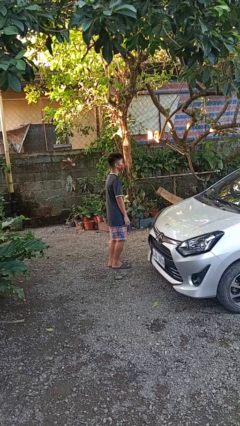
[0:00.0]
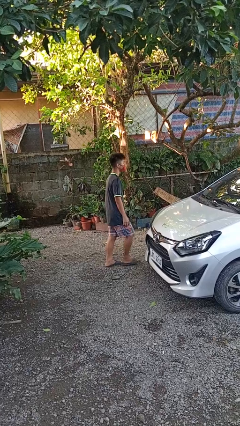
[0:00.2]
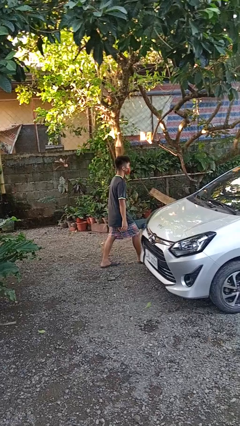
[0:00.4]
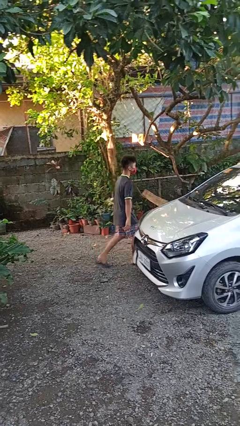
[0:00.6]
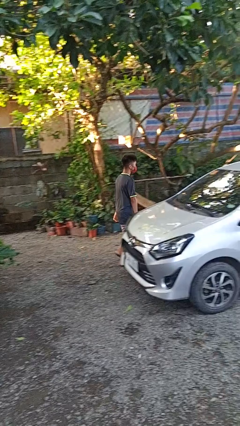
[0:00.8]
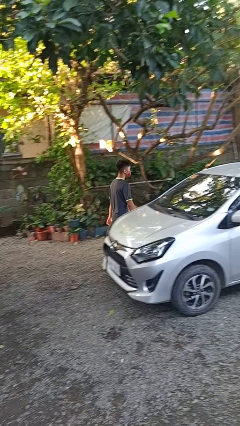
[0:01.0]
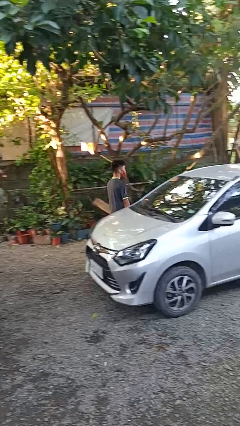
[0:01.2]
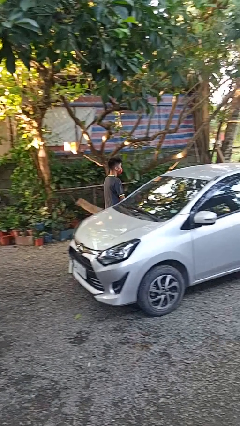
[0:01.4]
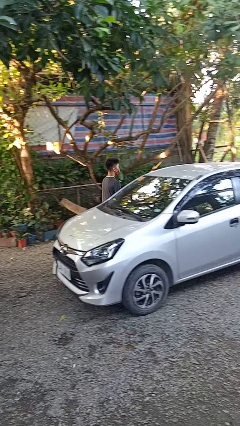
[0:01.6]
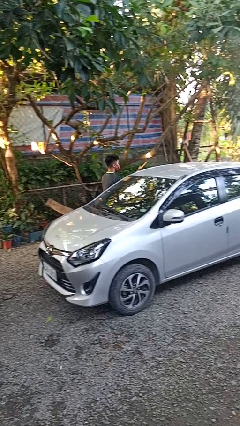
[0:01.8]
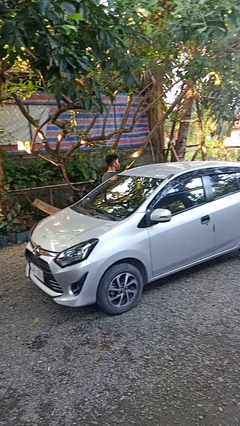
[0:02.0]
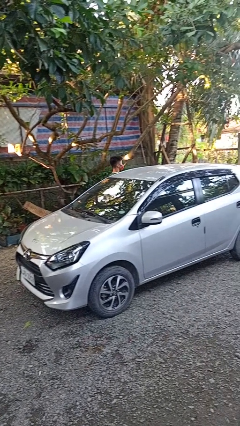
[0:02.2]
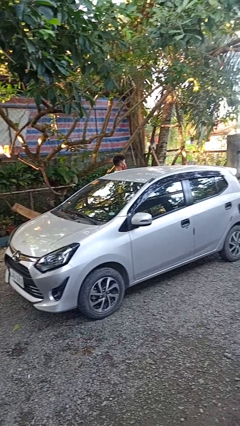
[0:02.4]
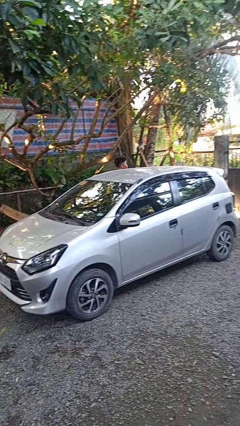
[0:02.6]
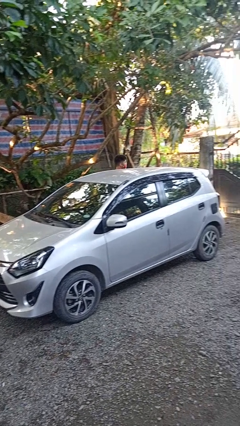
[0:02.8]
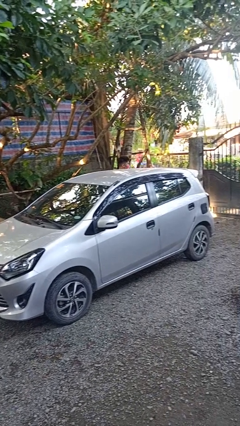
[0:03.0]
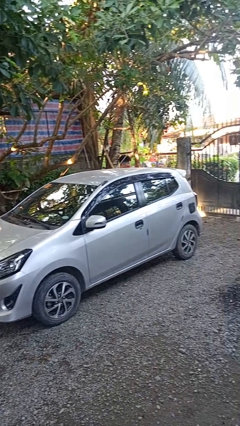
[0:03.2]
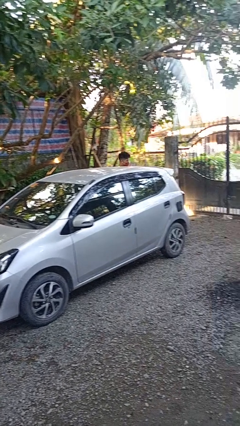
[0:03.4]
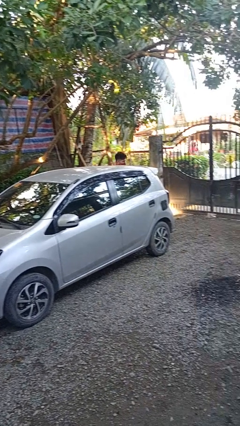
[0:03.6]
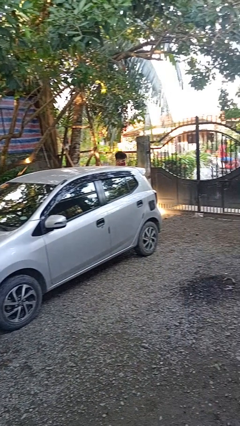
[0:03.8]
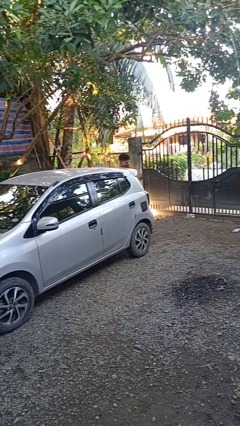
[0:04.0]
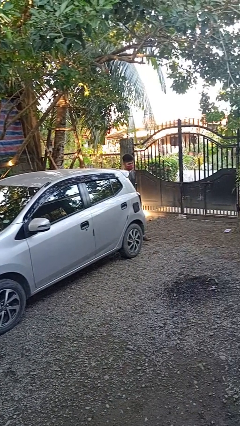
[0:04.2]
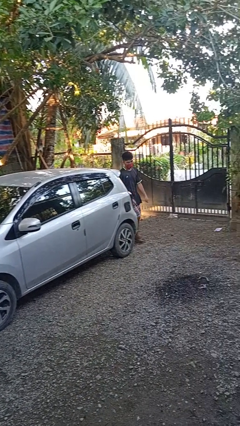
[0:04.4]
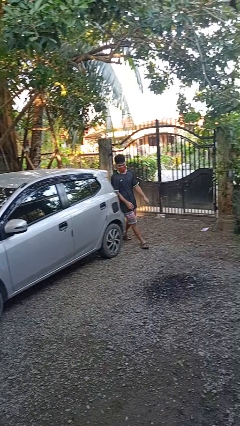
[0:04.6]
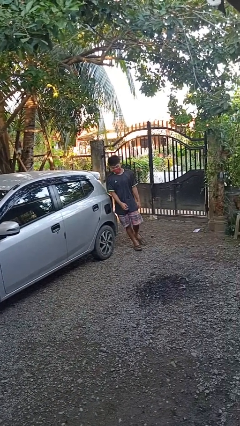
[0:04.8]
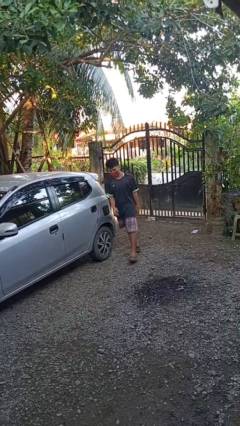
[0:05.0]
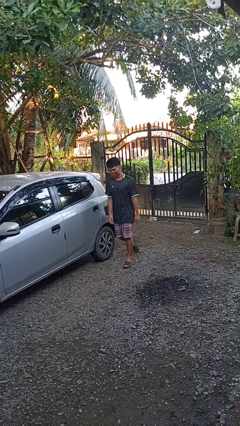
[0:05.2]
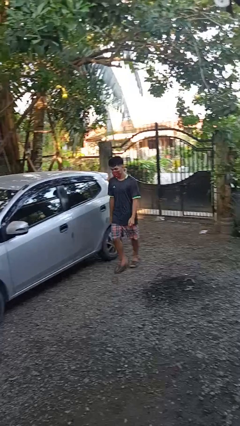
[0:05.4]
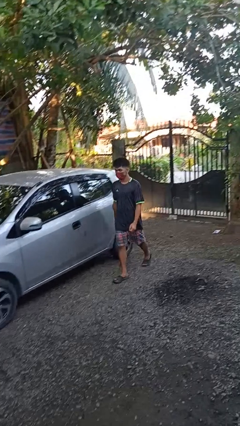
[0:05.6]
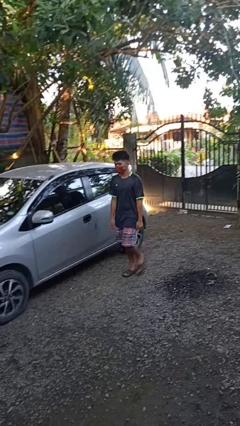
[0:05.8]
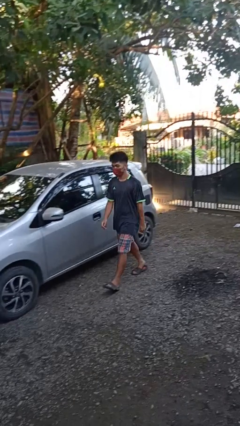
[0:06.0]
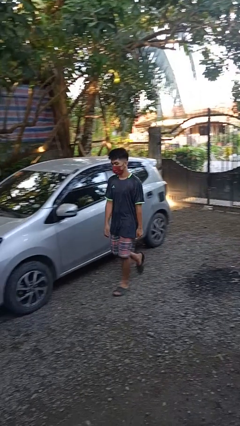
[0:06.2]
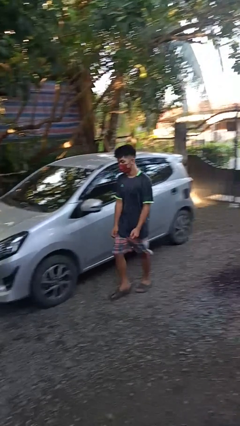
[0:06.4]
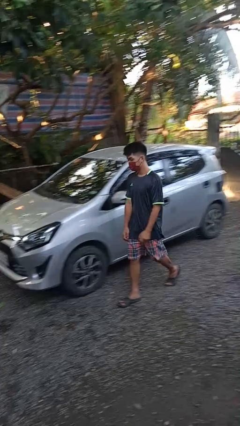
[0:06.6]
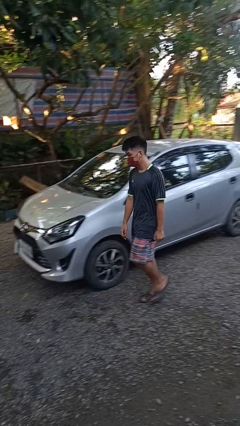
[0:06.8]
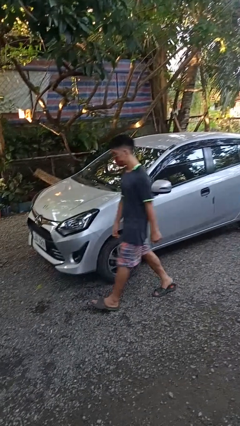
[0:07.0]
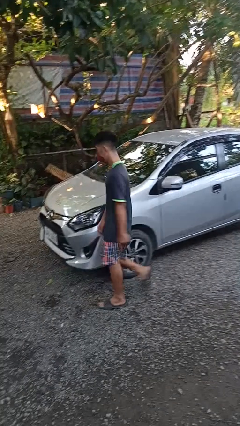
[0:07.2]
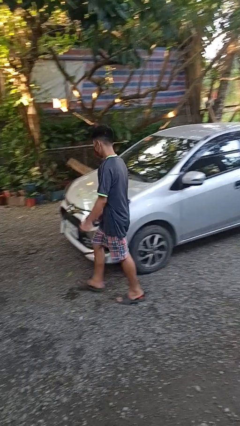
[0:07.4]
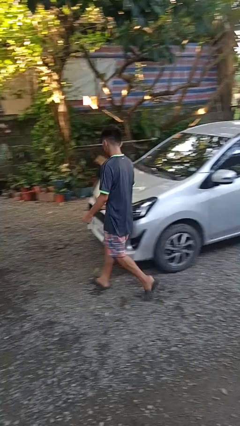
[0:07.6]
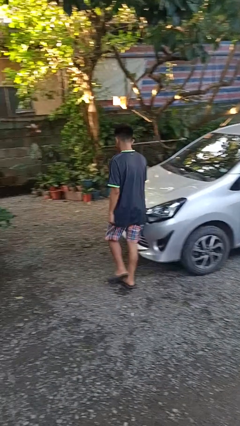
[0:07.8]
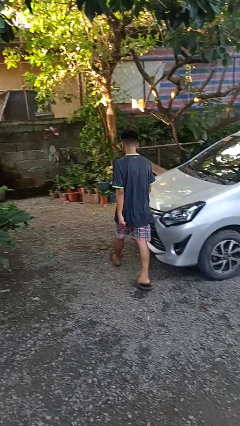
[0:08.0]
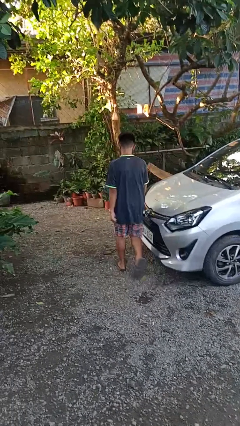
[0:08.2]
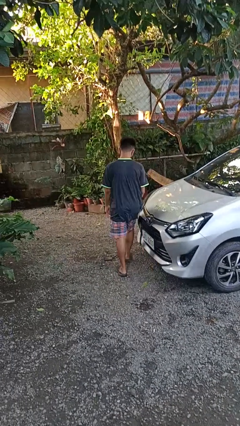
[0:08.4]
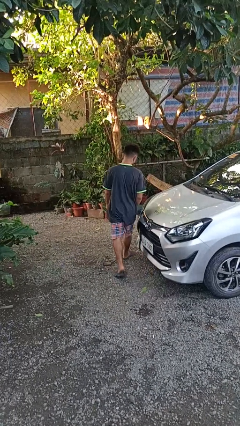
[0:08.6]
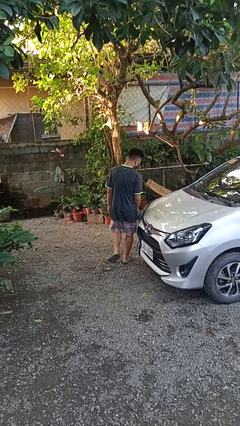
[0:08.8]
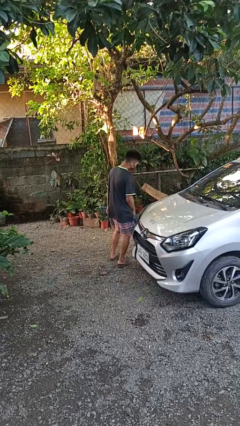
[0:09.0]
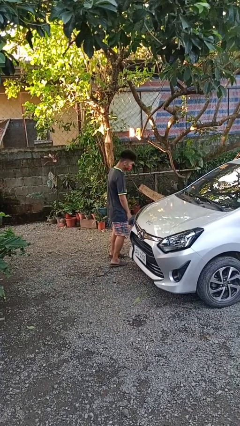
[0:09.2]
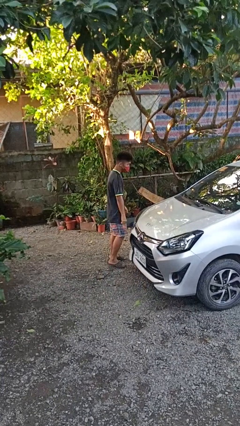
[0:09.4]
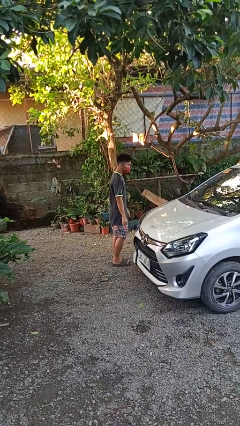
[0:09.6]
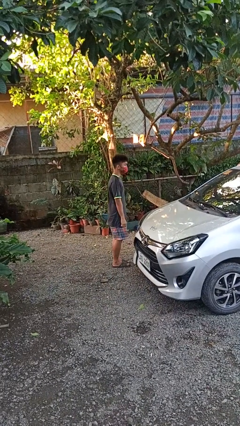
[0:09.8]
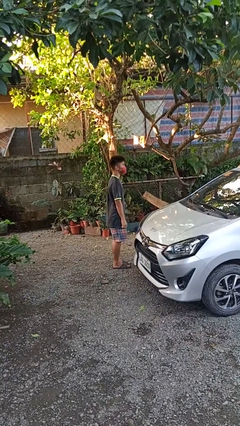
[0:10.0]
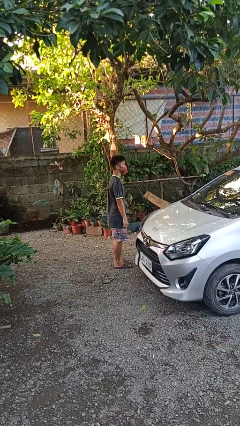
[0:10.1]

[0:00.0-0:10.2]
person walks around car

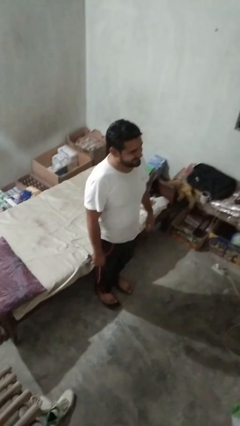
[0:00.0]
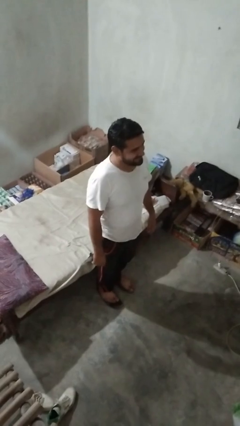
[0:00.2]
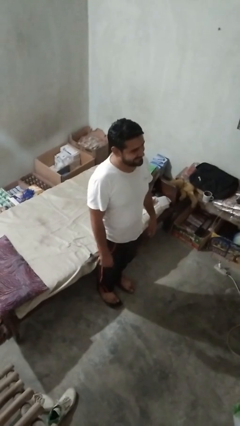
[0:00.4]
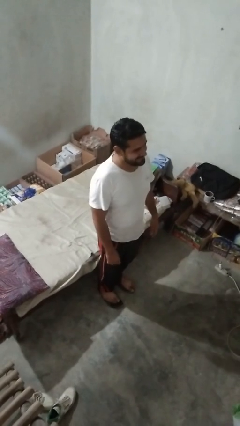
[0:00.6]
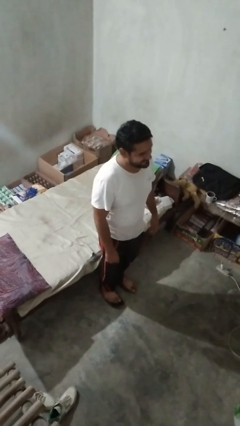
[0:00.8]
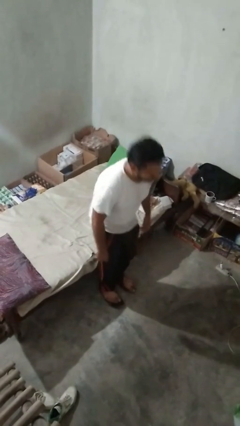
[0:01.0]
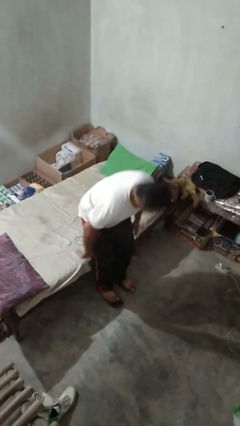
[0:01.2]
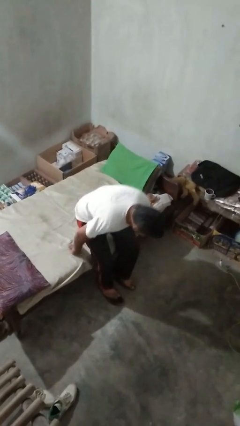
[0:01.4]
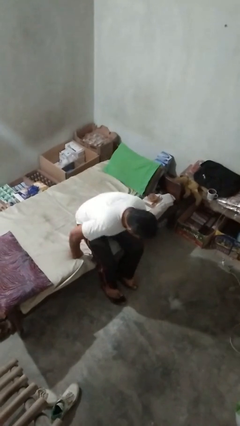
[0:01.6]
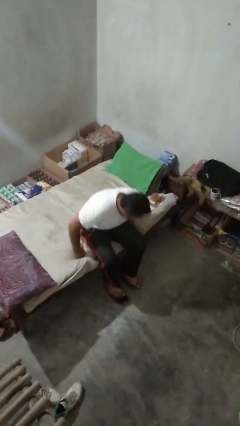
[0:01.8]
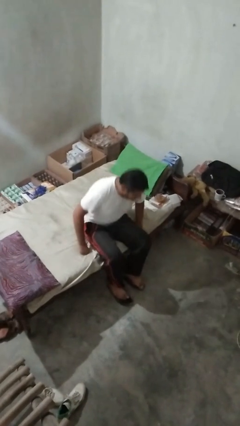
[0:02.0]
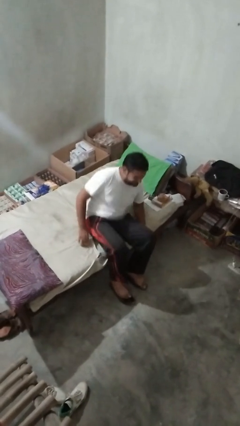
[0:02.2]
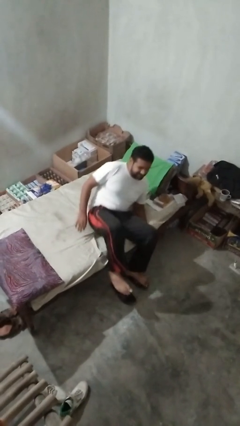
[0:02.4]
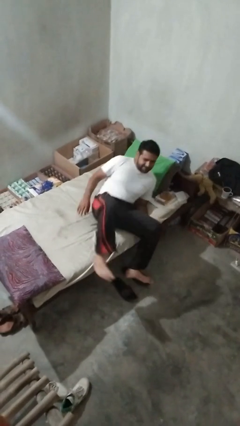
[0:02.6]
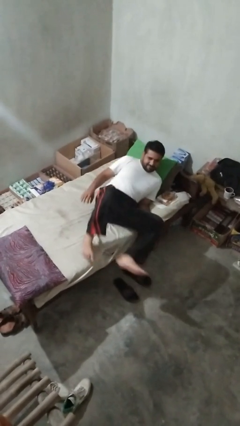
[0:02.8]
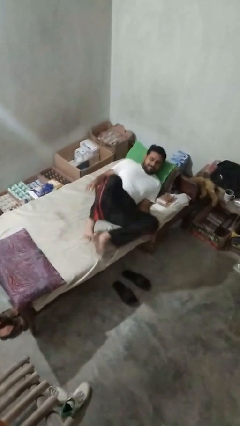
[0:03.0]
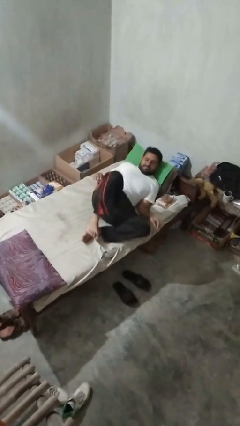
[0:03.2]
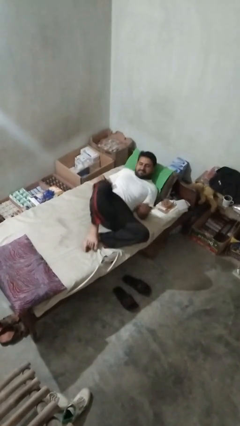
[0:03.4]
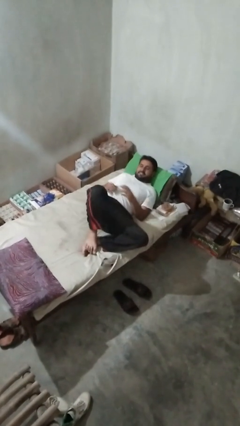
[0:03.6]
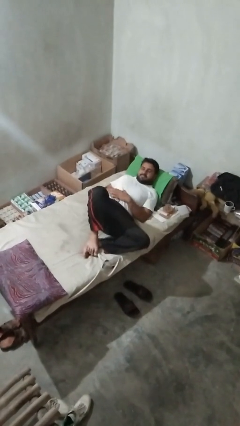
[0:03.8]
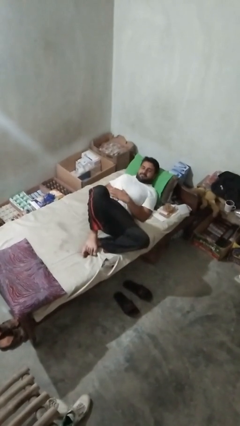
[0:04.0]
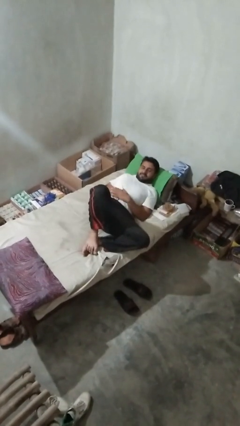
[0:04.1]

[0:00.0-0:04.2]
person lies down on bed

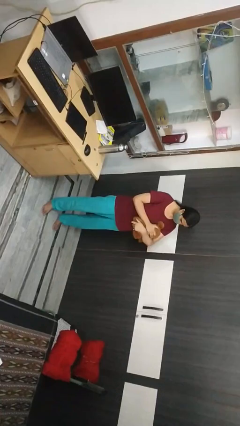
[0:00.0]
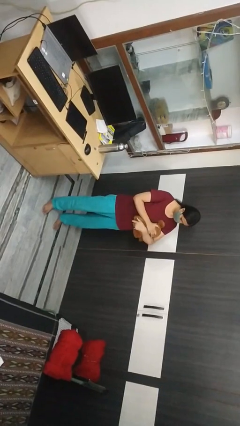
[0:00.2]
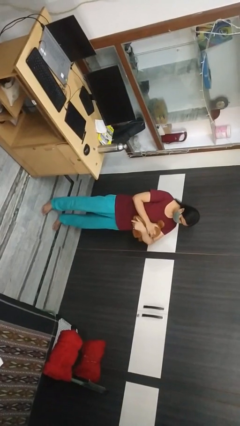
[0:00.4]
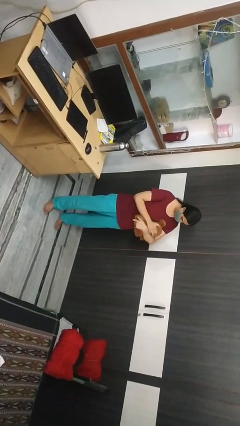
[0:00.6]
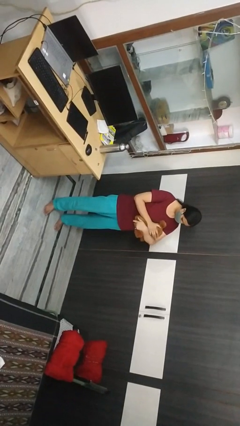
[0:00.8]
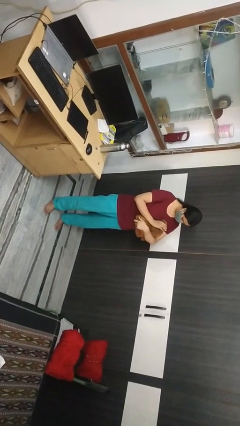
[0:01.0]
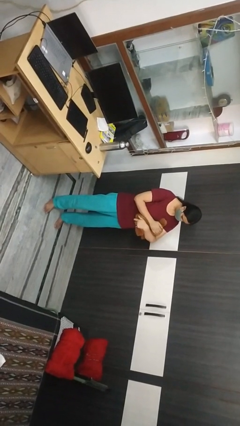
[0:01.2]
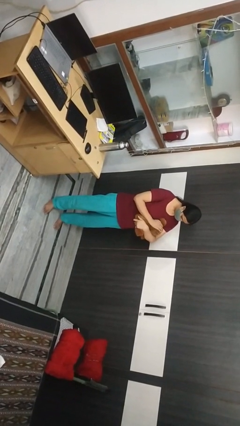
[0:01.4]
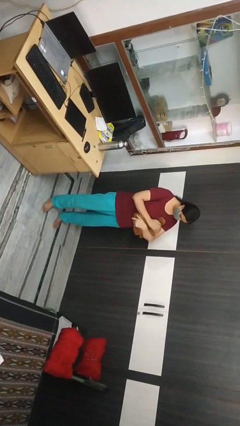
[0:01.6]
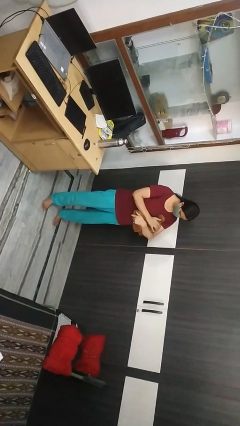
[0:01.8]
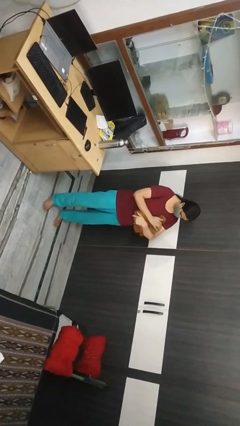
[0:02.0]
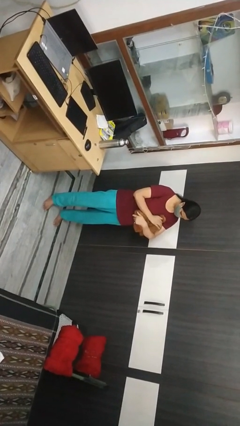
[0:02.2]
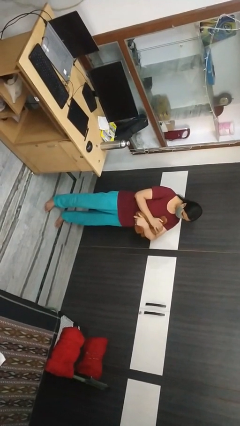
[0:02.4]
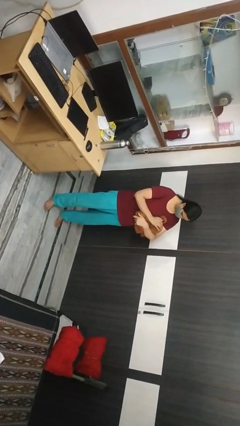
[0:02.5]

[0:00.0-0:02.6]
person pets cat

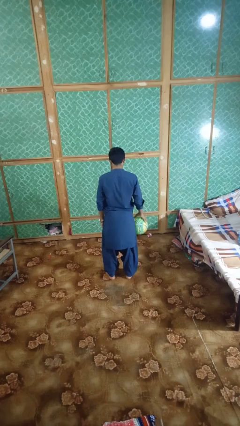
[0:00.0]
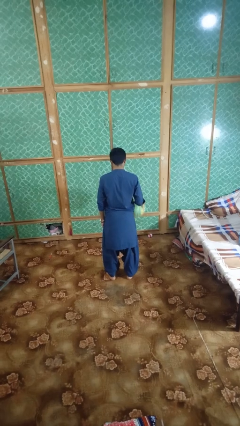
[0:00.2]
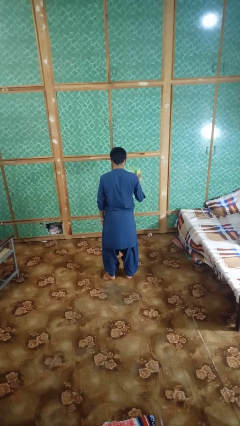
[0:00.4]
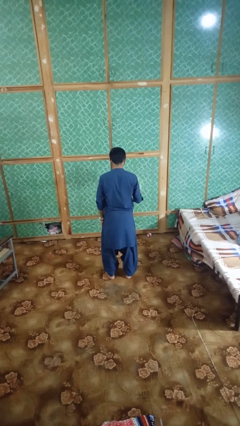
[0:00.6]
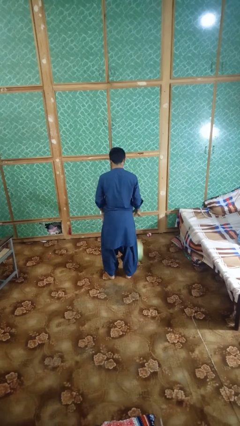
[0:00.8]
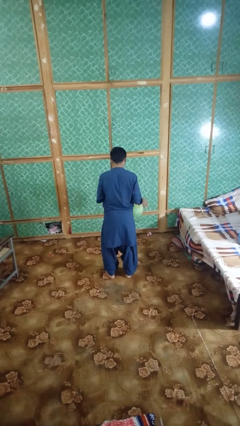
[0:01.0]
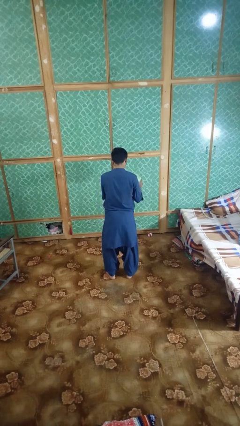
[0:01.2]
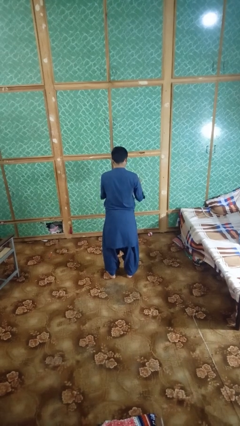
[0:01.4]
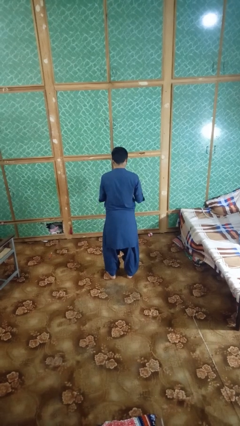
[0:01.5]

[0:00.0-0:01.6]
person bounces ball on floor
